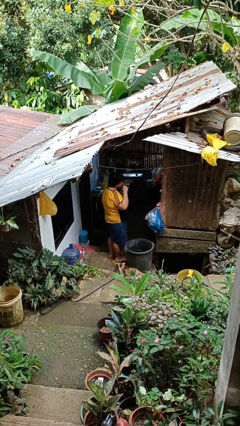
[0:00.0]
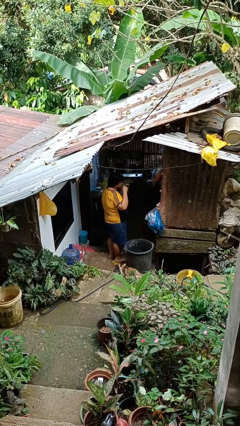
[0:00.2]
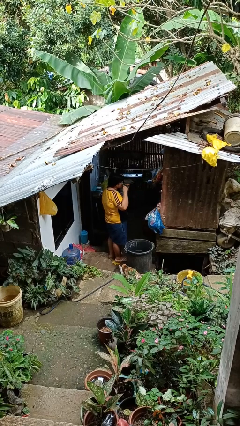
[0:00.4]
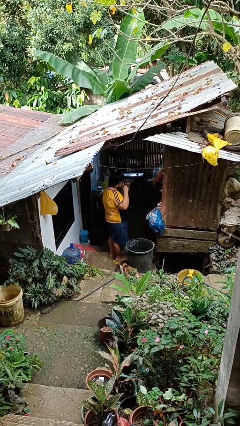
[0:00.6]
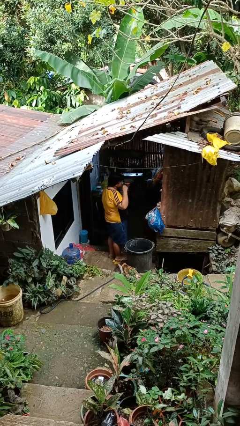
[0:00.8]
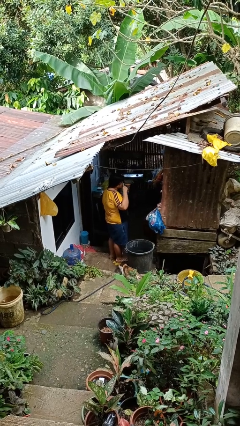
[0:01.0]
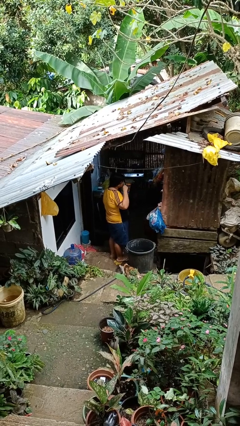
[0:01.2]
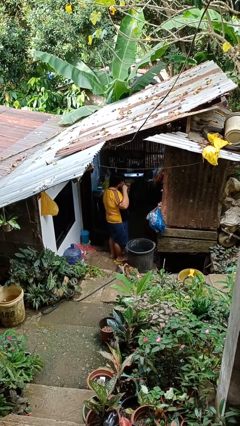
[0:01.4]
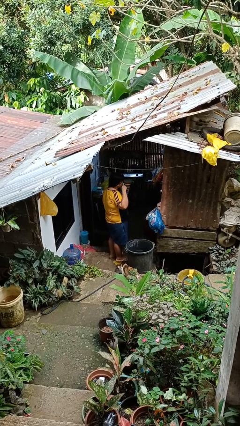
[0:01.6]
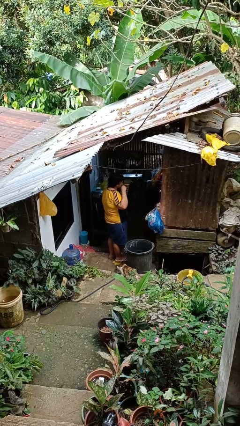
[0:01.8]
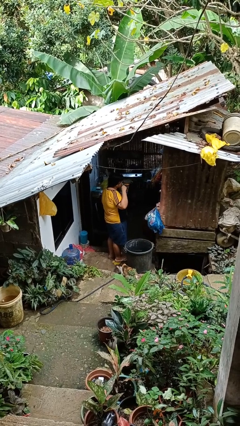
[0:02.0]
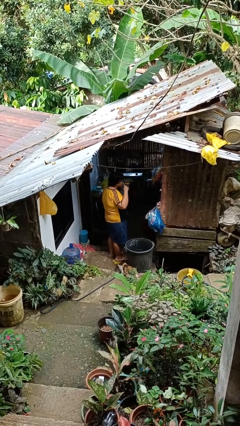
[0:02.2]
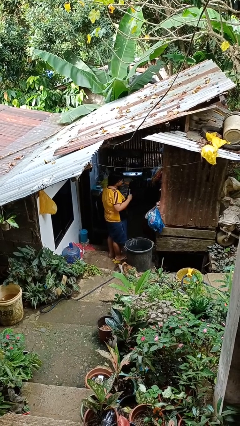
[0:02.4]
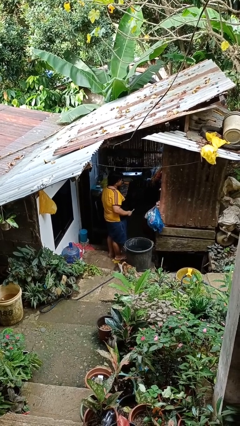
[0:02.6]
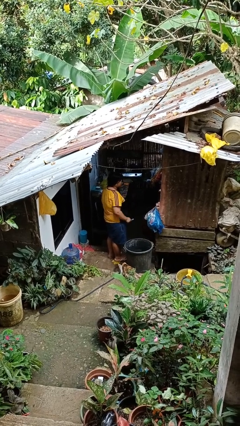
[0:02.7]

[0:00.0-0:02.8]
person brushes teeth

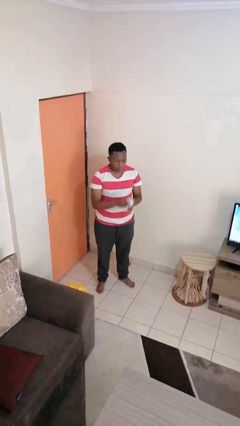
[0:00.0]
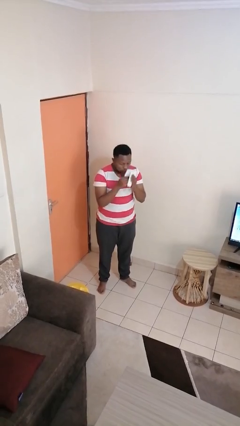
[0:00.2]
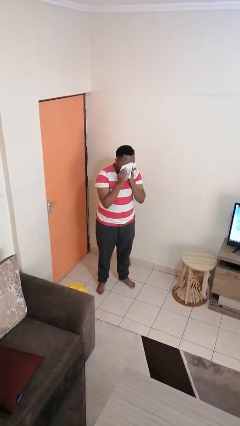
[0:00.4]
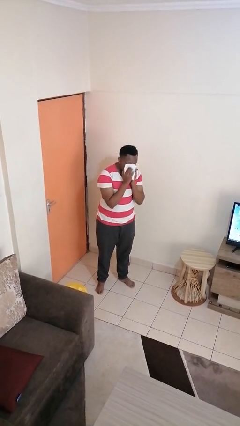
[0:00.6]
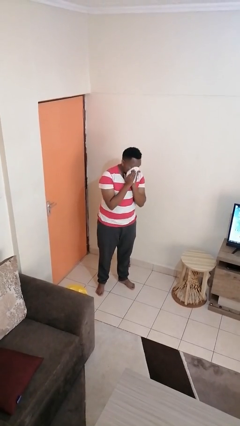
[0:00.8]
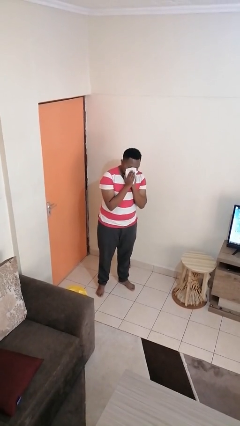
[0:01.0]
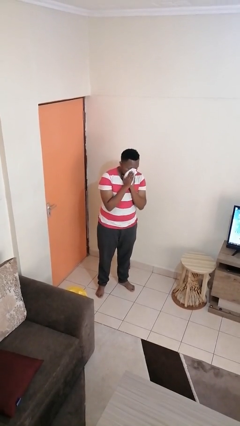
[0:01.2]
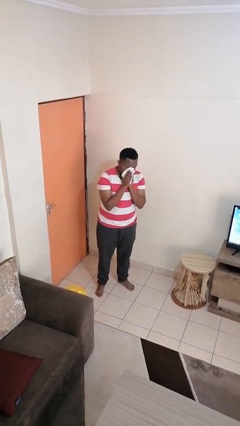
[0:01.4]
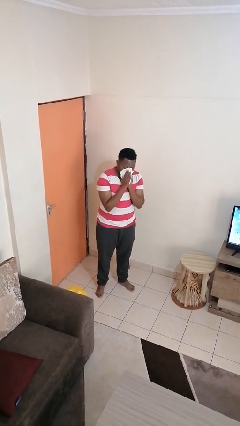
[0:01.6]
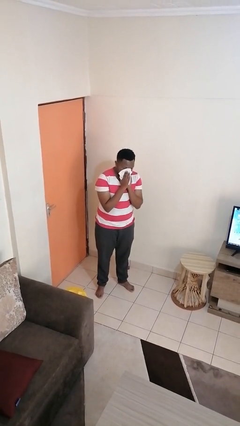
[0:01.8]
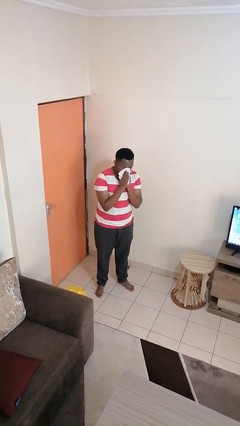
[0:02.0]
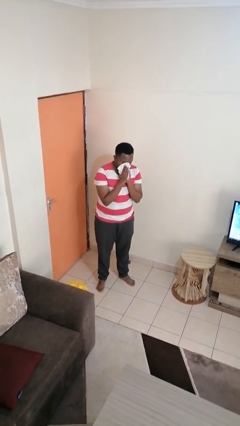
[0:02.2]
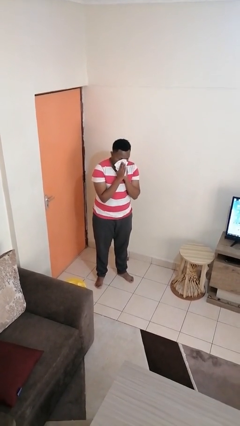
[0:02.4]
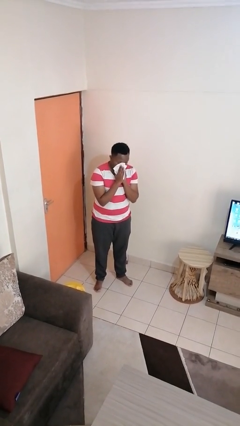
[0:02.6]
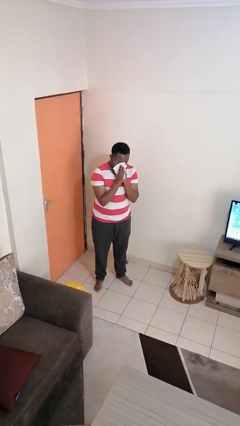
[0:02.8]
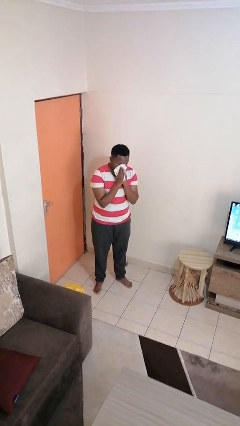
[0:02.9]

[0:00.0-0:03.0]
person blows nose

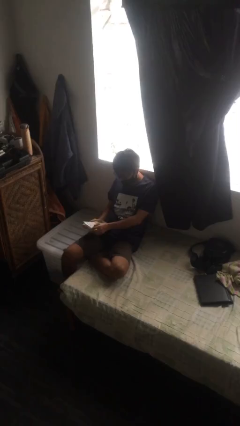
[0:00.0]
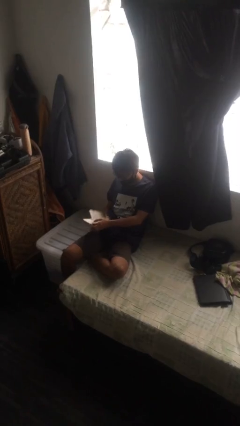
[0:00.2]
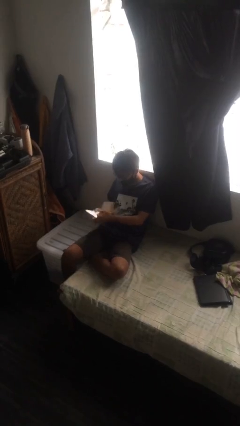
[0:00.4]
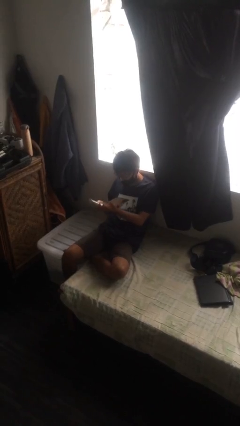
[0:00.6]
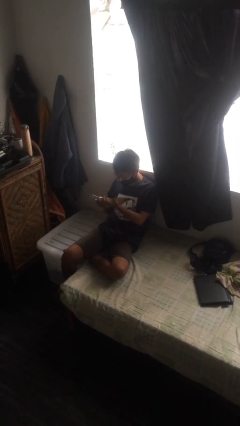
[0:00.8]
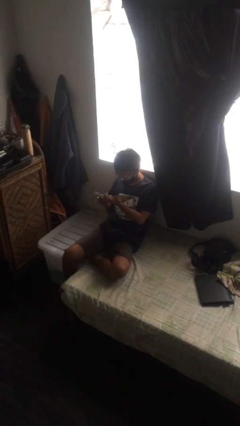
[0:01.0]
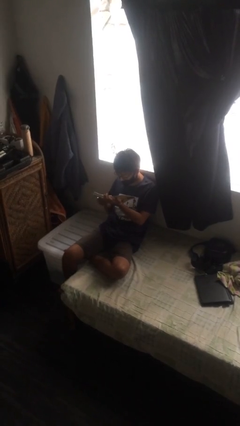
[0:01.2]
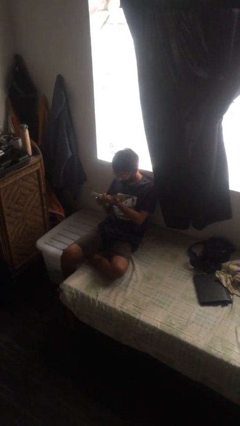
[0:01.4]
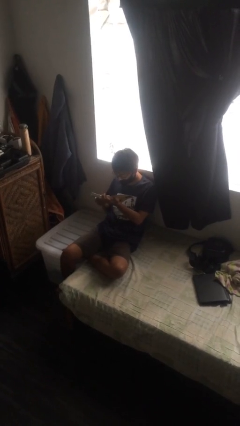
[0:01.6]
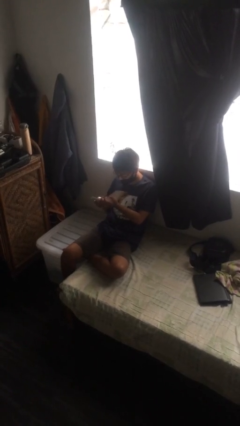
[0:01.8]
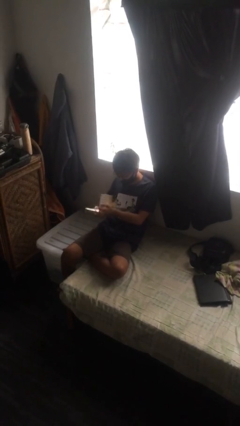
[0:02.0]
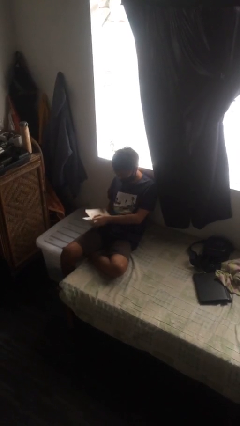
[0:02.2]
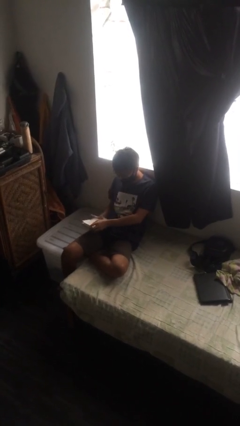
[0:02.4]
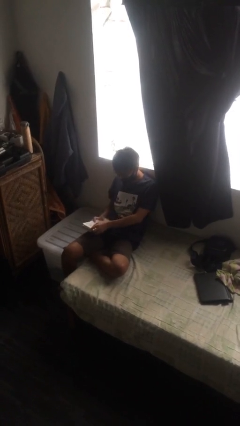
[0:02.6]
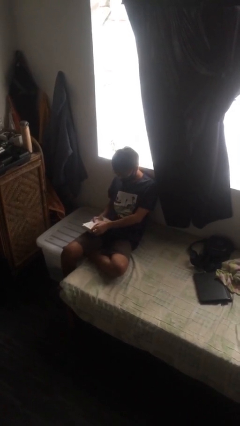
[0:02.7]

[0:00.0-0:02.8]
person reads document

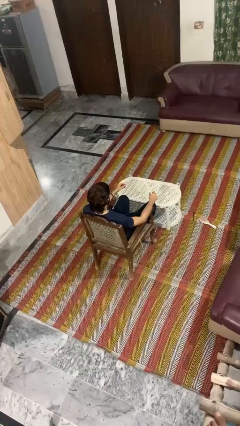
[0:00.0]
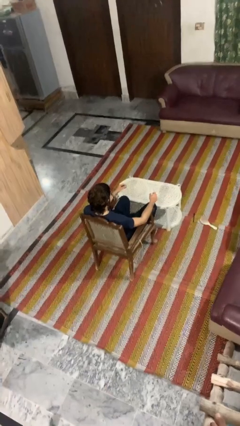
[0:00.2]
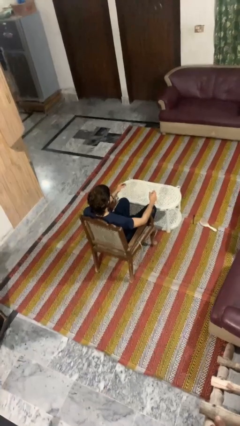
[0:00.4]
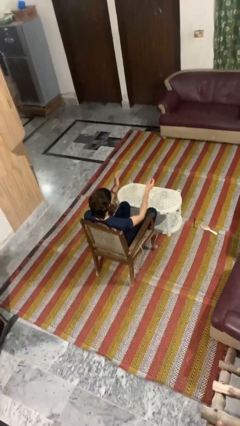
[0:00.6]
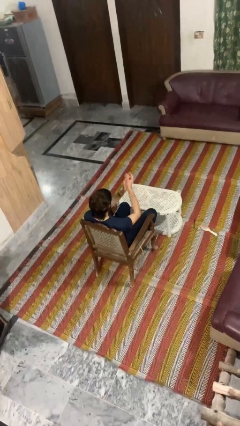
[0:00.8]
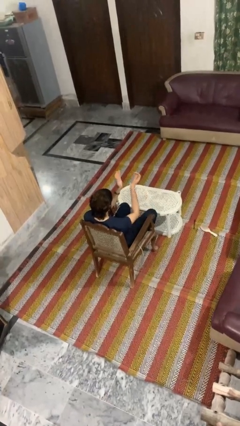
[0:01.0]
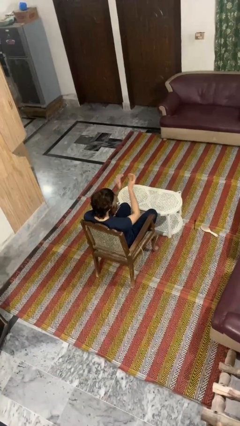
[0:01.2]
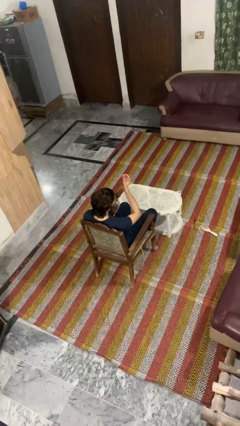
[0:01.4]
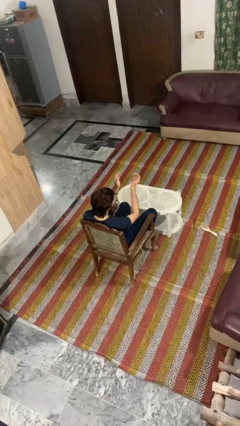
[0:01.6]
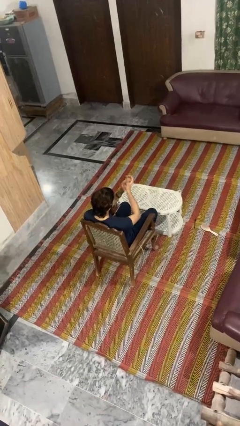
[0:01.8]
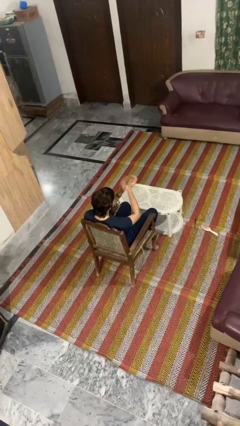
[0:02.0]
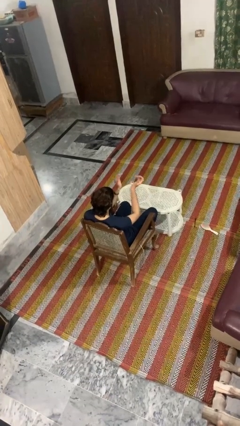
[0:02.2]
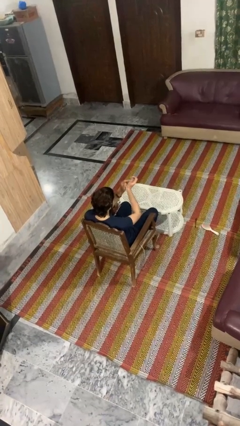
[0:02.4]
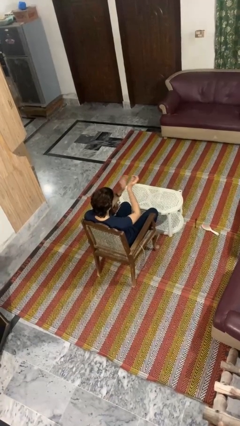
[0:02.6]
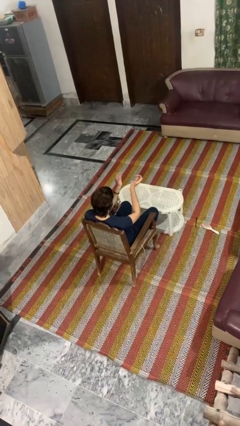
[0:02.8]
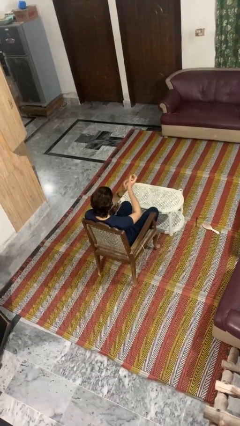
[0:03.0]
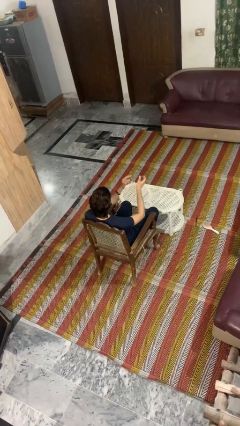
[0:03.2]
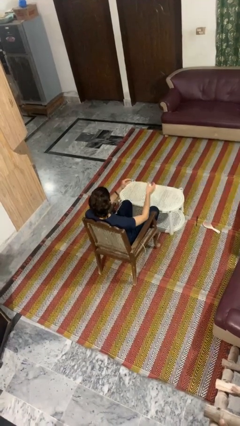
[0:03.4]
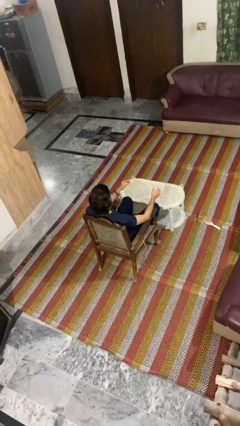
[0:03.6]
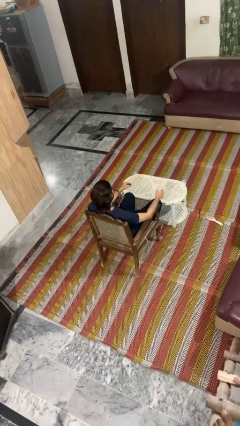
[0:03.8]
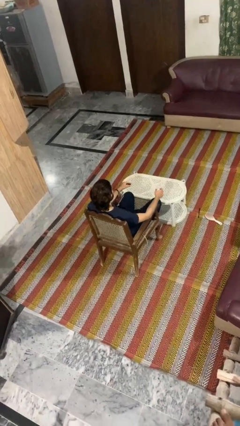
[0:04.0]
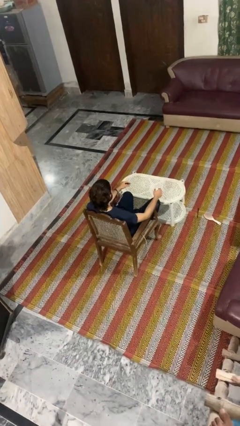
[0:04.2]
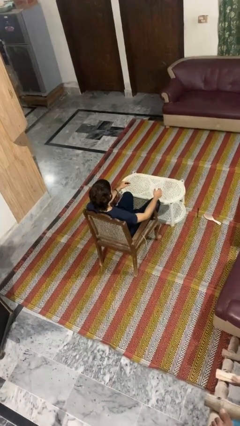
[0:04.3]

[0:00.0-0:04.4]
person claps hands

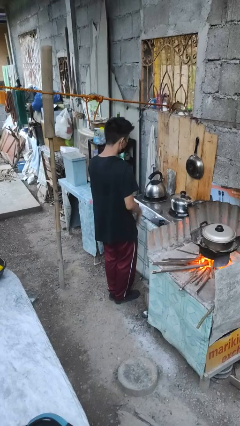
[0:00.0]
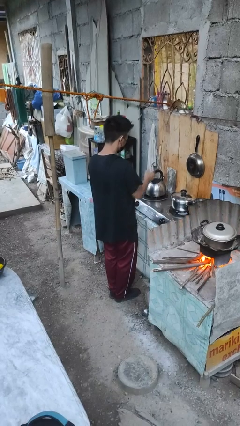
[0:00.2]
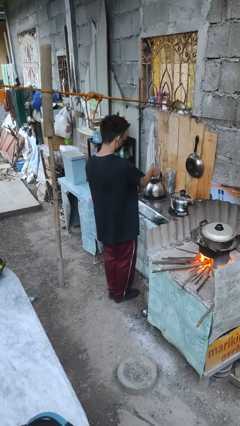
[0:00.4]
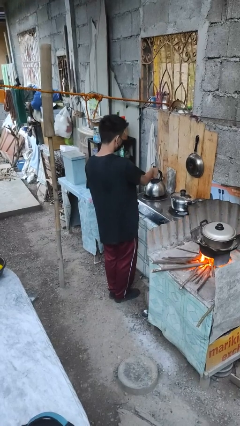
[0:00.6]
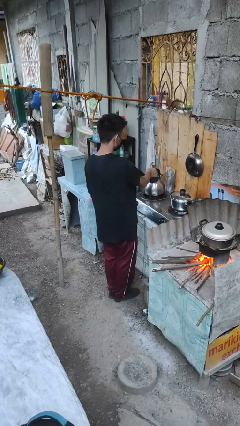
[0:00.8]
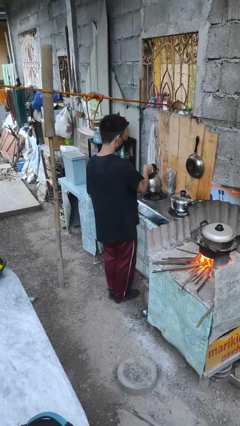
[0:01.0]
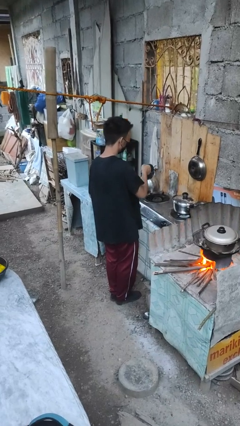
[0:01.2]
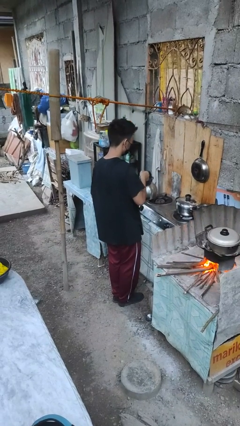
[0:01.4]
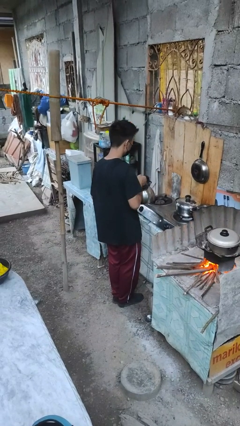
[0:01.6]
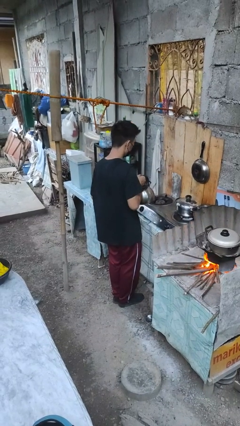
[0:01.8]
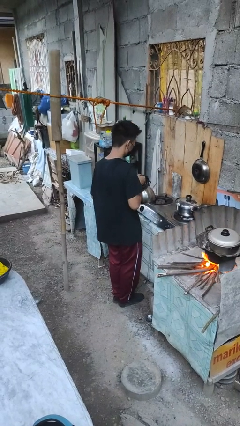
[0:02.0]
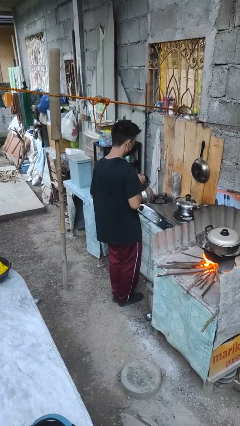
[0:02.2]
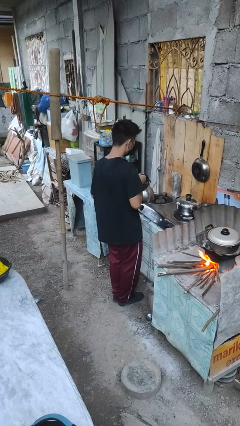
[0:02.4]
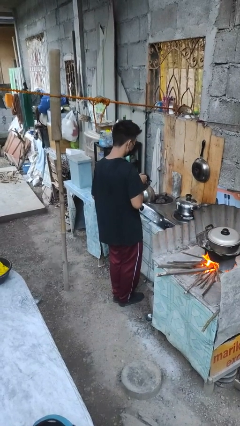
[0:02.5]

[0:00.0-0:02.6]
person picks up object from countertop

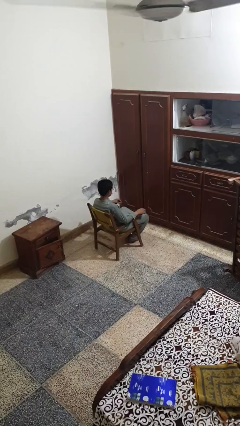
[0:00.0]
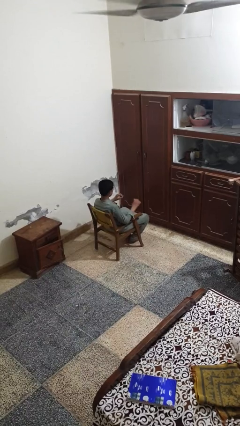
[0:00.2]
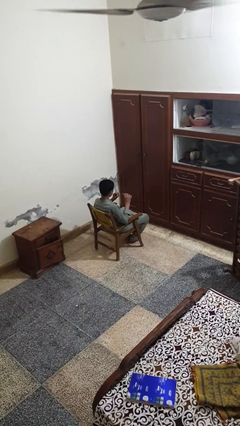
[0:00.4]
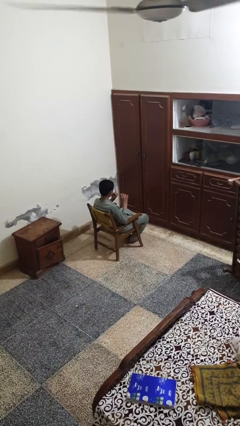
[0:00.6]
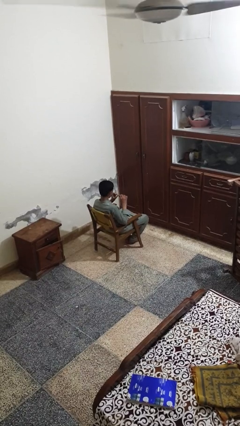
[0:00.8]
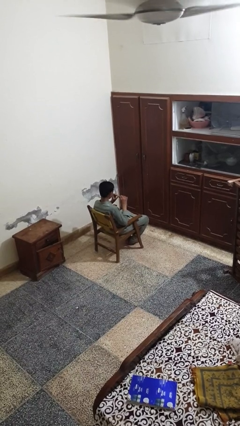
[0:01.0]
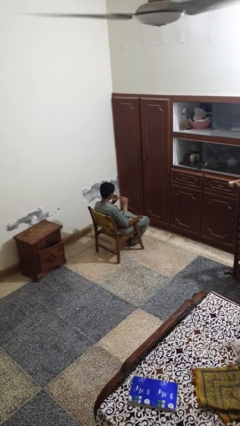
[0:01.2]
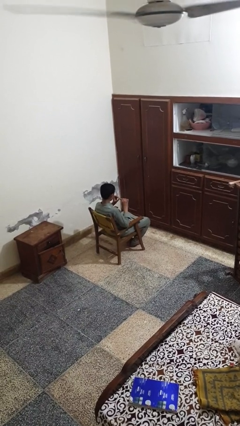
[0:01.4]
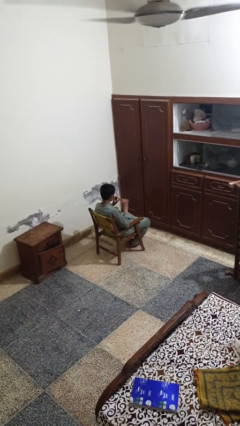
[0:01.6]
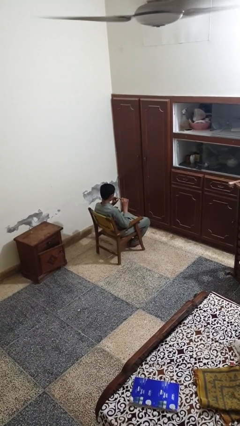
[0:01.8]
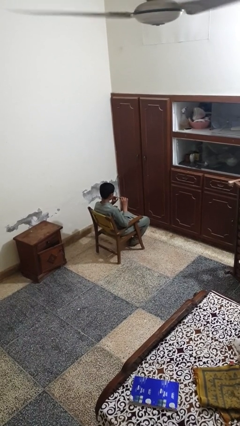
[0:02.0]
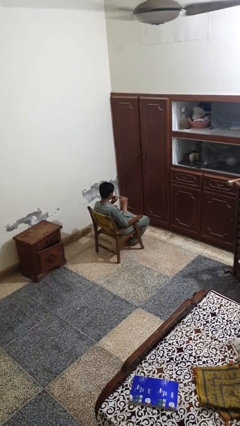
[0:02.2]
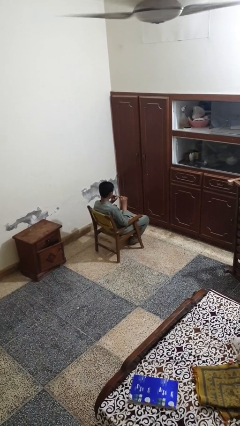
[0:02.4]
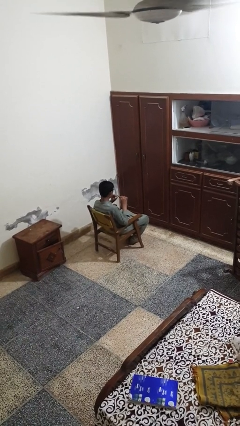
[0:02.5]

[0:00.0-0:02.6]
person clips fingernails
